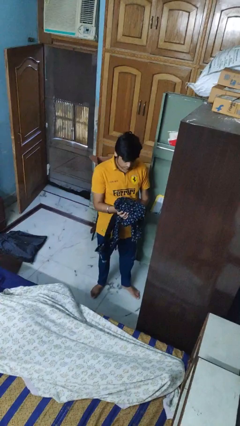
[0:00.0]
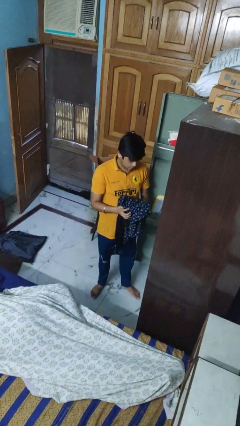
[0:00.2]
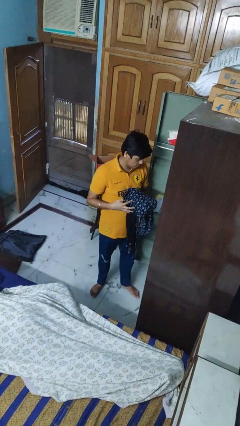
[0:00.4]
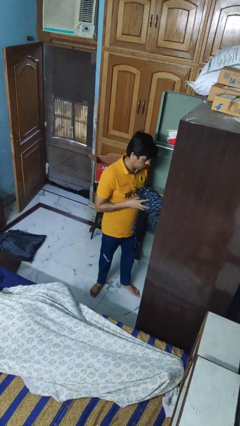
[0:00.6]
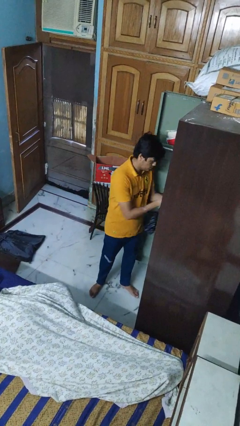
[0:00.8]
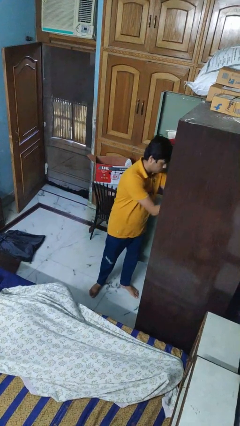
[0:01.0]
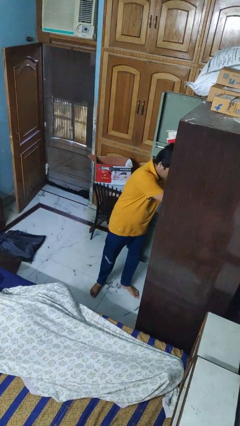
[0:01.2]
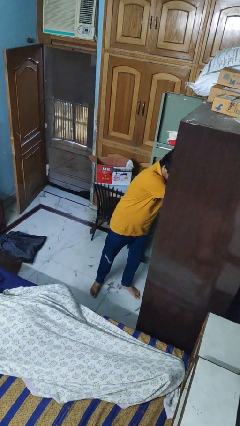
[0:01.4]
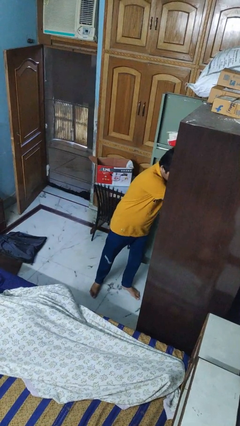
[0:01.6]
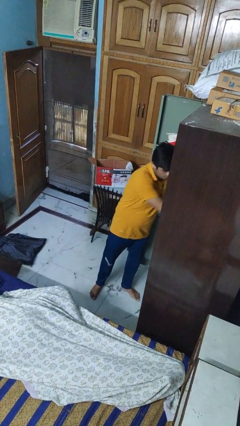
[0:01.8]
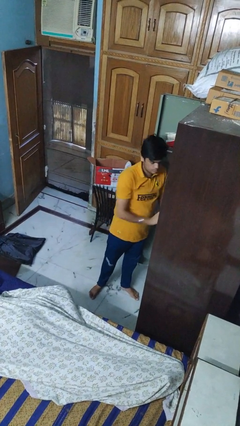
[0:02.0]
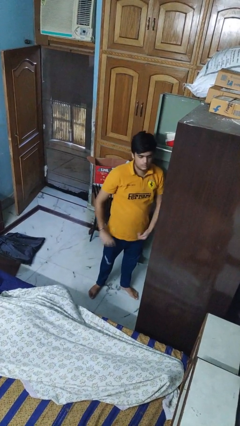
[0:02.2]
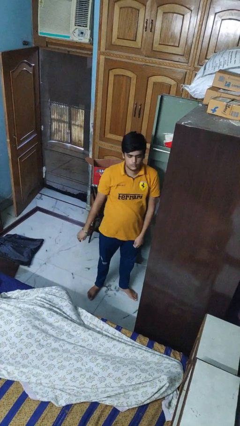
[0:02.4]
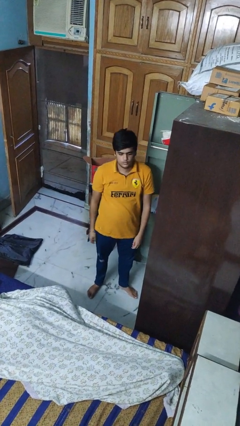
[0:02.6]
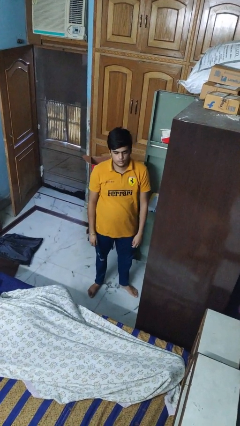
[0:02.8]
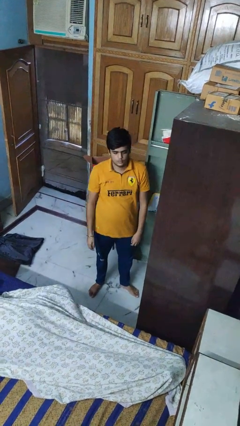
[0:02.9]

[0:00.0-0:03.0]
person puts clothes into dresser

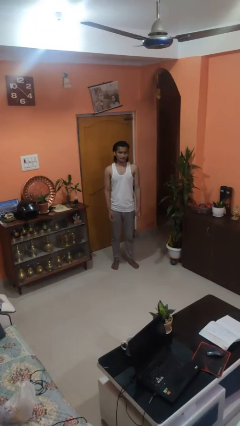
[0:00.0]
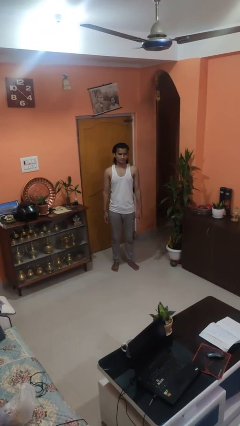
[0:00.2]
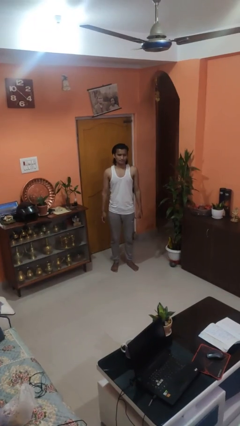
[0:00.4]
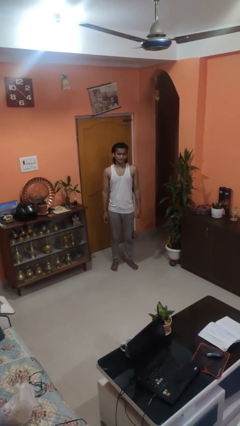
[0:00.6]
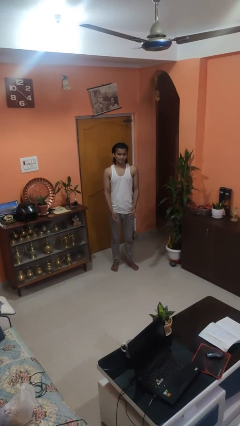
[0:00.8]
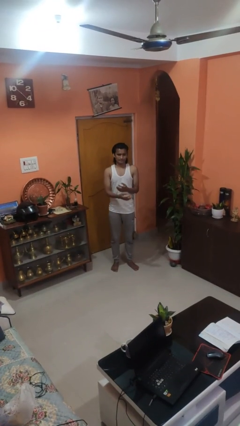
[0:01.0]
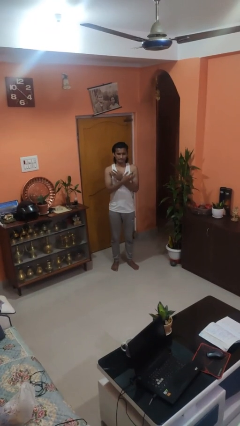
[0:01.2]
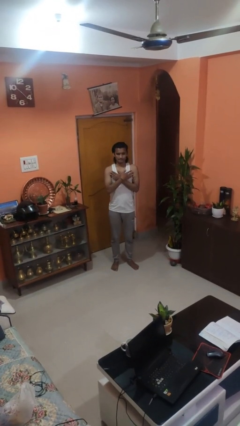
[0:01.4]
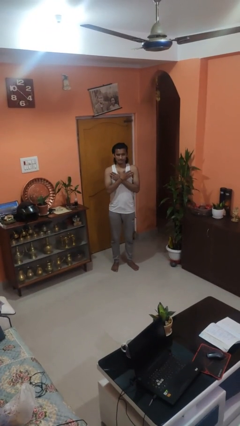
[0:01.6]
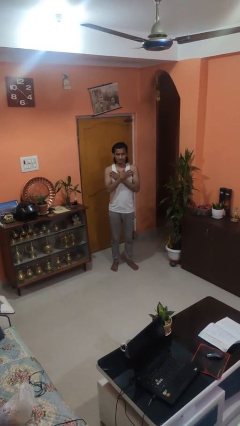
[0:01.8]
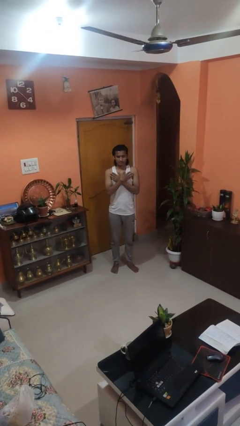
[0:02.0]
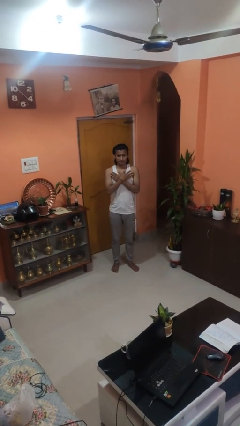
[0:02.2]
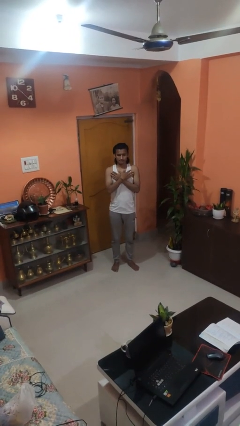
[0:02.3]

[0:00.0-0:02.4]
person drums on chest

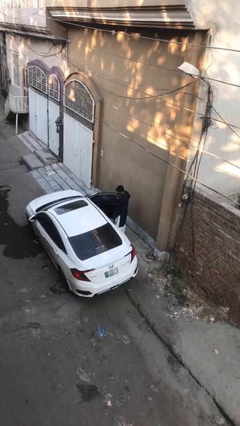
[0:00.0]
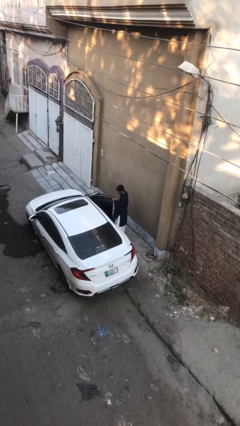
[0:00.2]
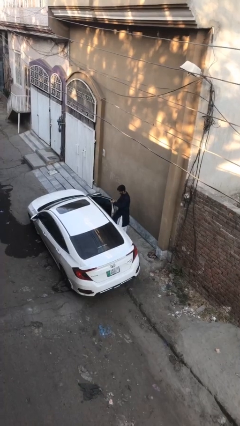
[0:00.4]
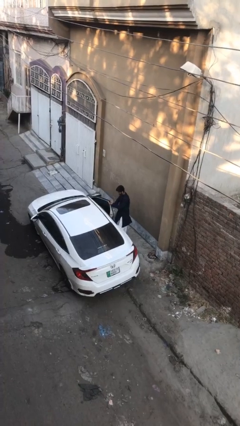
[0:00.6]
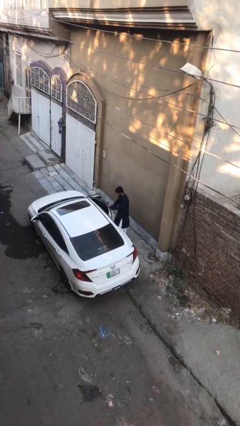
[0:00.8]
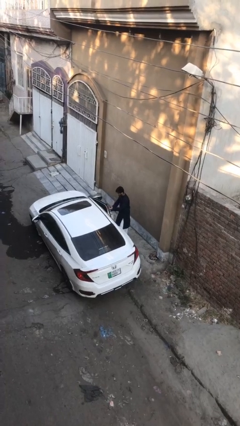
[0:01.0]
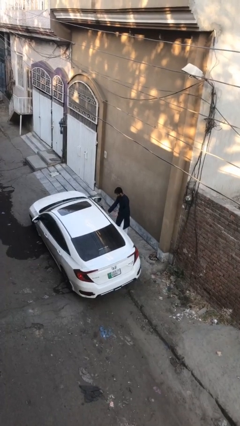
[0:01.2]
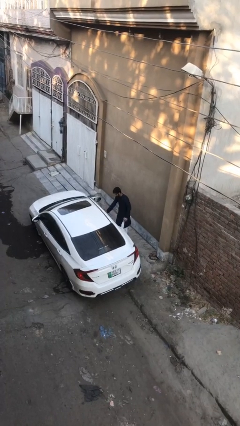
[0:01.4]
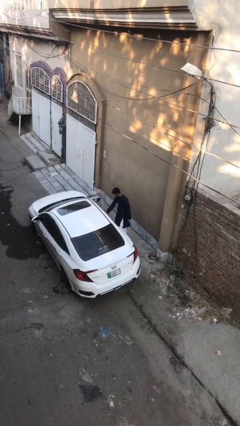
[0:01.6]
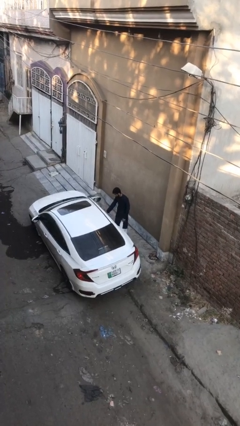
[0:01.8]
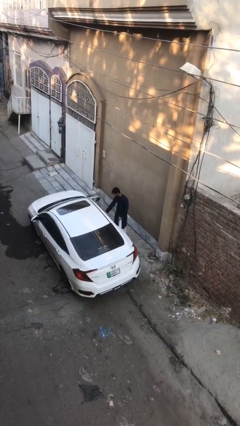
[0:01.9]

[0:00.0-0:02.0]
person closes car door

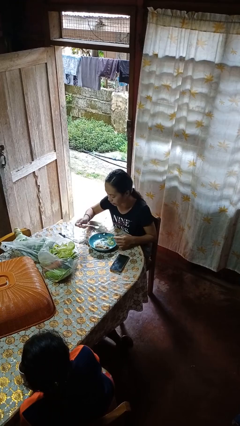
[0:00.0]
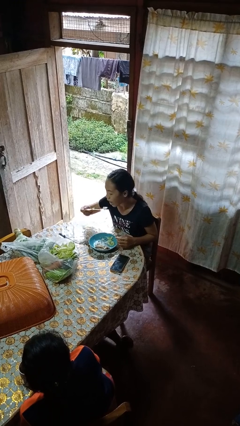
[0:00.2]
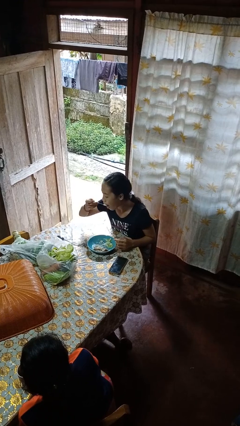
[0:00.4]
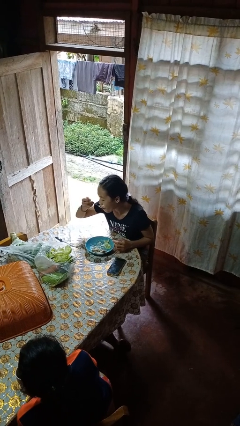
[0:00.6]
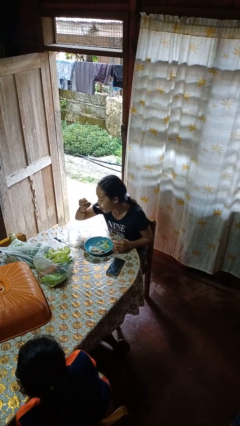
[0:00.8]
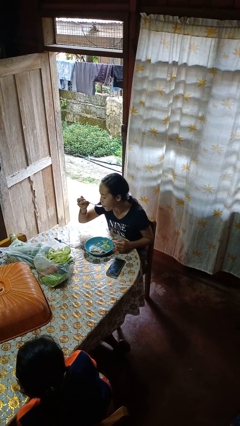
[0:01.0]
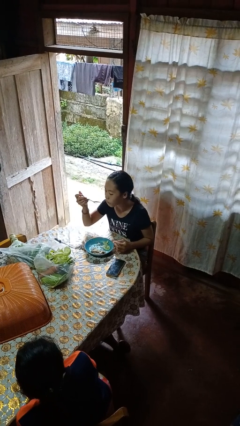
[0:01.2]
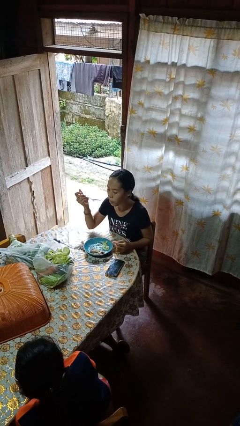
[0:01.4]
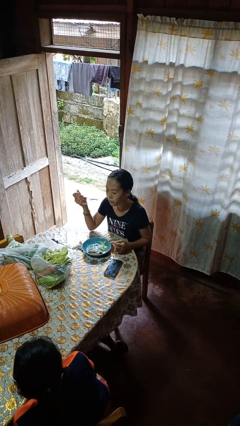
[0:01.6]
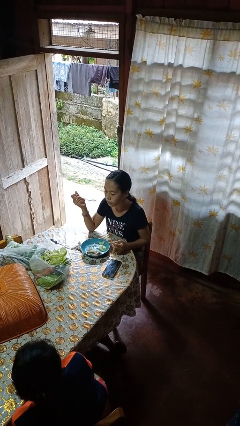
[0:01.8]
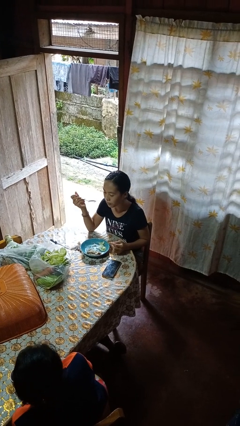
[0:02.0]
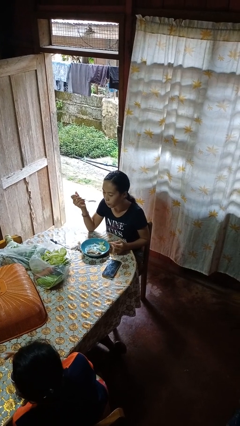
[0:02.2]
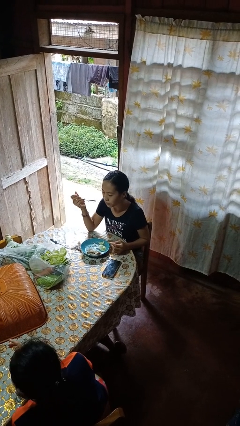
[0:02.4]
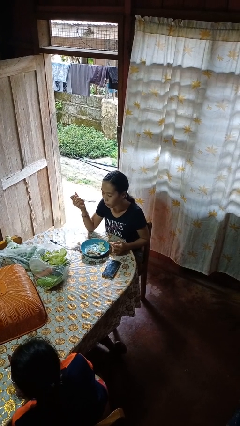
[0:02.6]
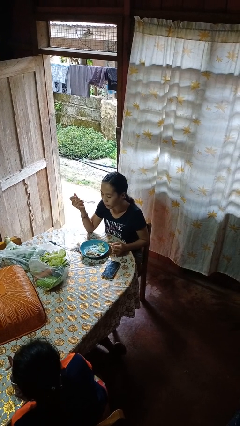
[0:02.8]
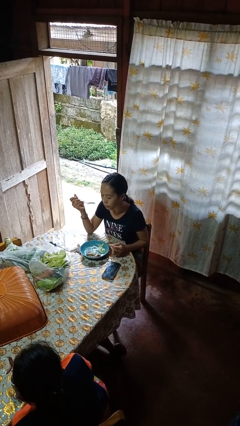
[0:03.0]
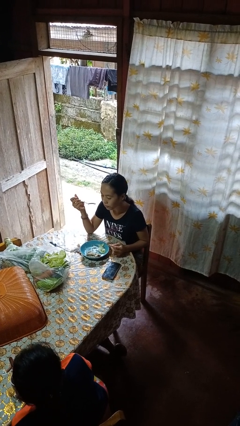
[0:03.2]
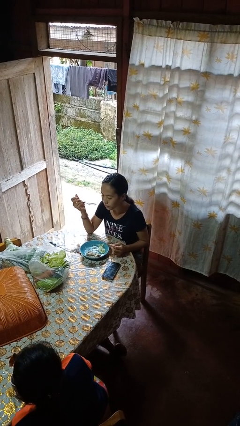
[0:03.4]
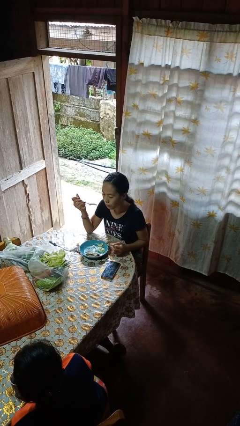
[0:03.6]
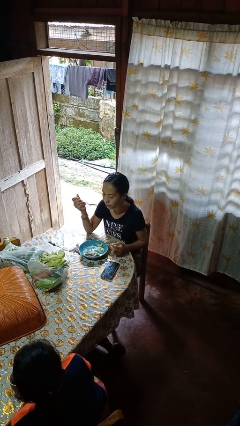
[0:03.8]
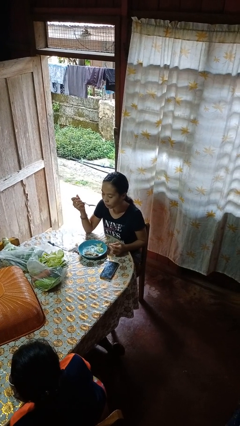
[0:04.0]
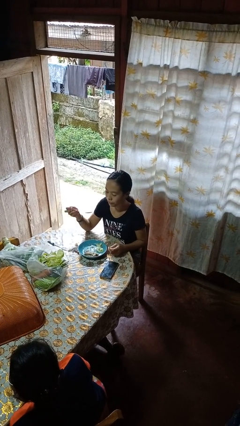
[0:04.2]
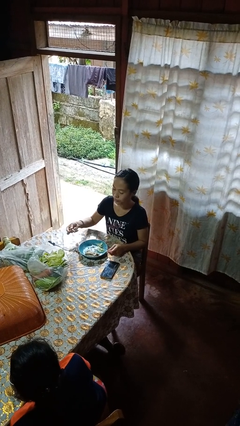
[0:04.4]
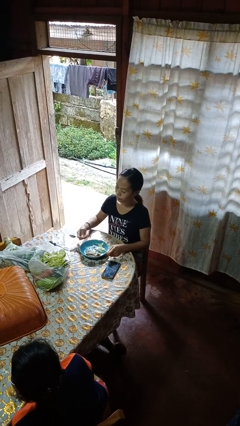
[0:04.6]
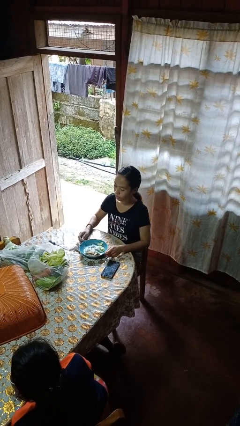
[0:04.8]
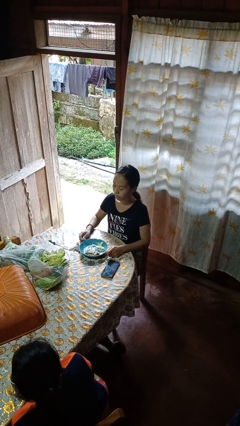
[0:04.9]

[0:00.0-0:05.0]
person eats with utensil

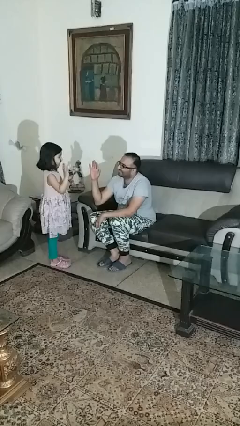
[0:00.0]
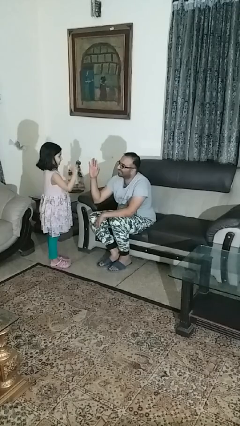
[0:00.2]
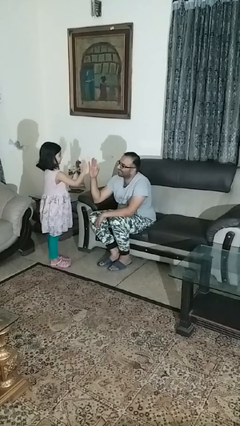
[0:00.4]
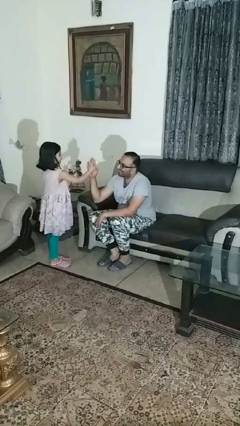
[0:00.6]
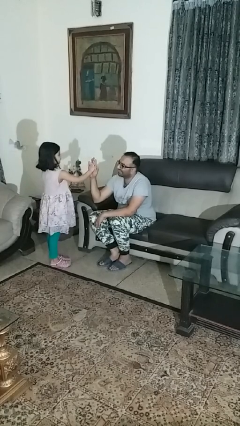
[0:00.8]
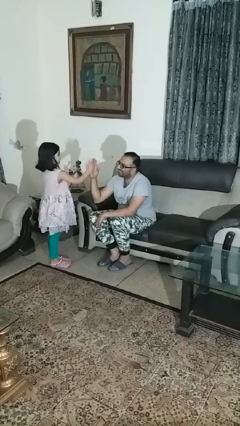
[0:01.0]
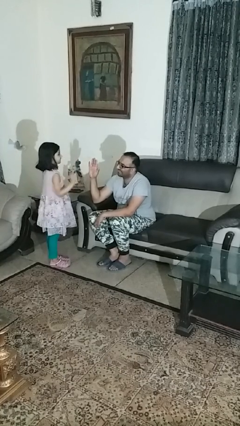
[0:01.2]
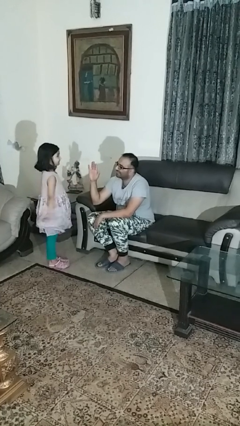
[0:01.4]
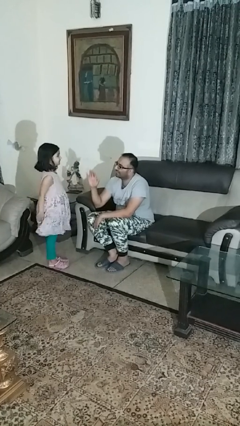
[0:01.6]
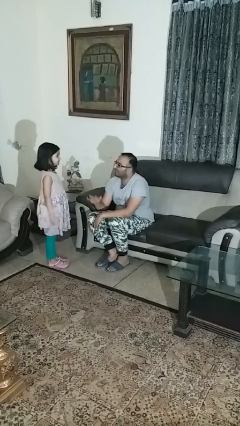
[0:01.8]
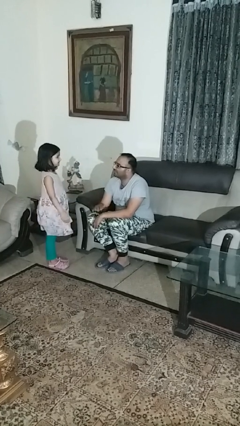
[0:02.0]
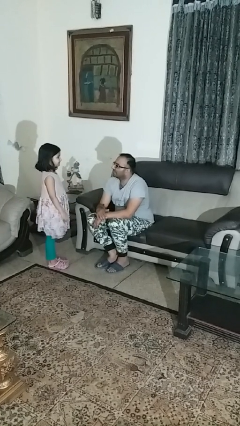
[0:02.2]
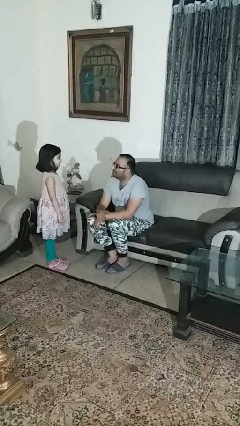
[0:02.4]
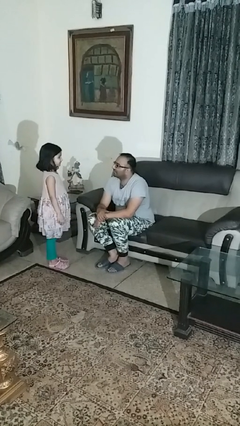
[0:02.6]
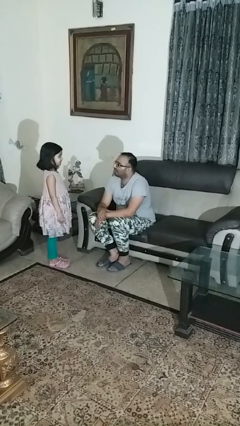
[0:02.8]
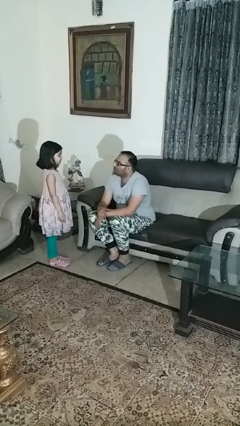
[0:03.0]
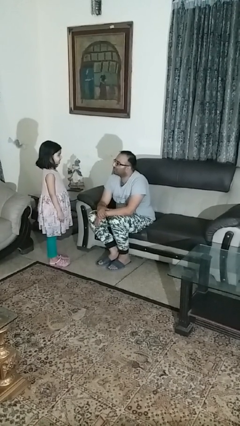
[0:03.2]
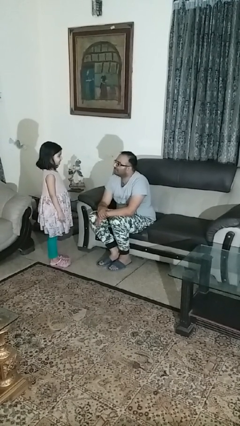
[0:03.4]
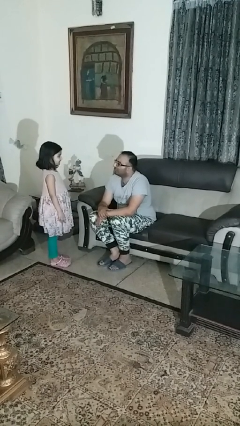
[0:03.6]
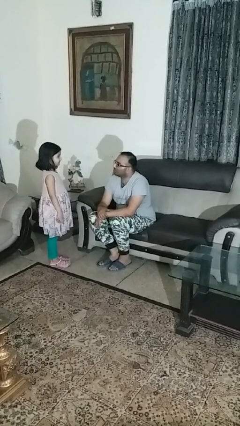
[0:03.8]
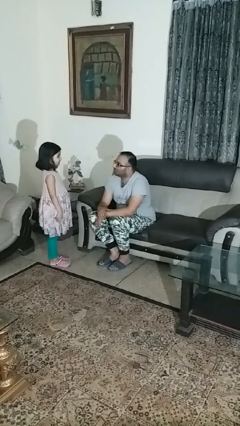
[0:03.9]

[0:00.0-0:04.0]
person highfives hand

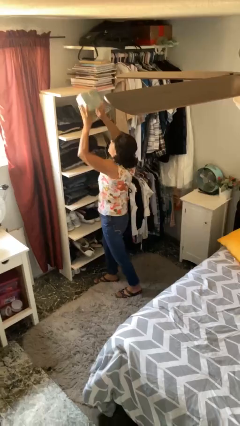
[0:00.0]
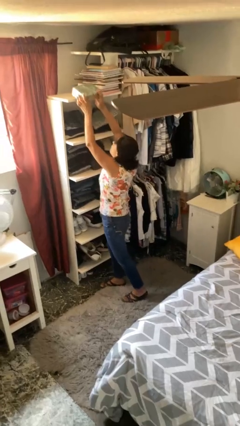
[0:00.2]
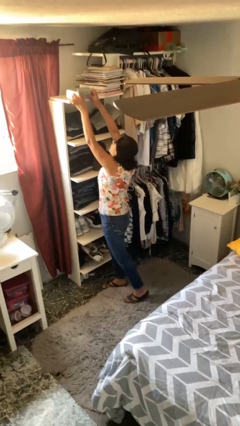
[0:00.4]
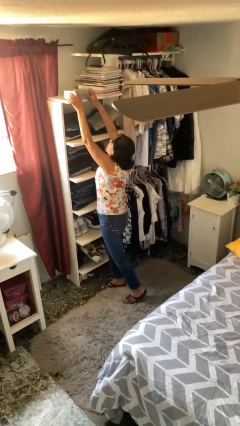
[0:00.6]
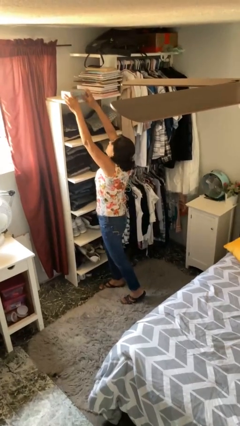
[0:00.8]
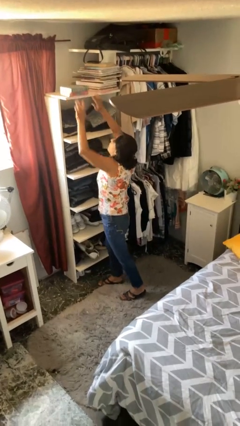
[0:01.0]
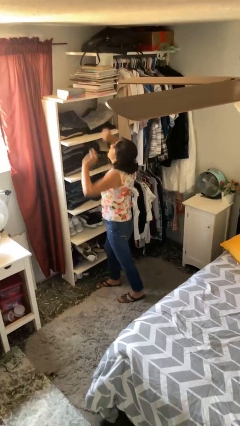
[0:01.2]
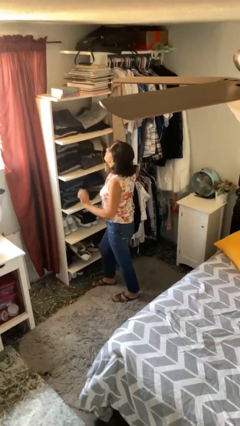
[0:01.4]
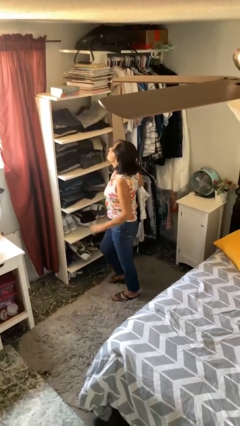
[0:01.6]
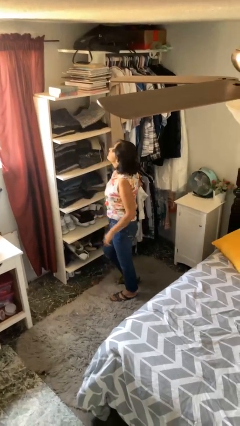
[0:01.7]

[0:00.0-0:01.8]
person puts down object on shelf
